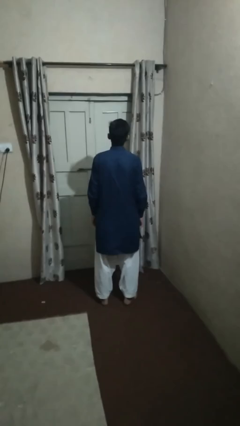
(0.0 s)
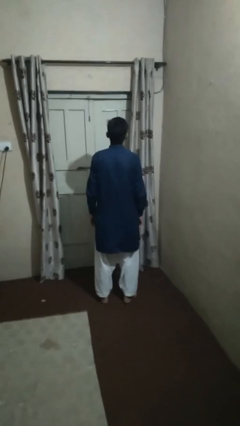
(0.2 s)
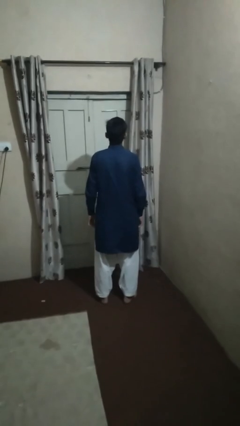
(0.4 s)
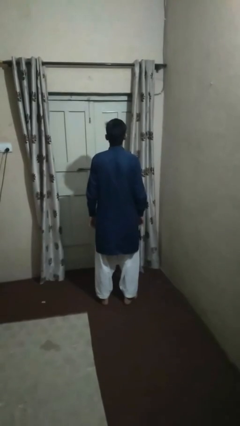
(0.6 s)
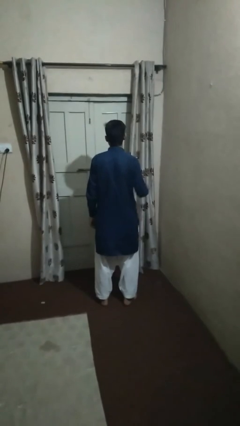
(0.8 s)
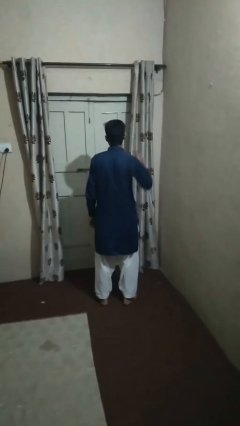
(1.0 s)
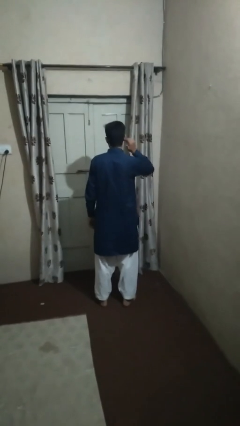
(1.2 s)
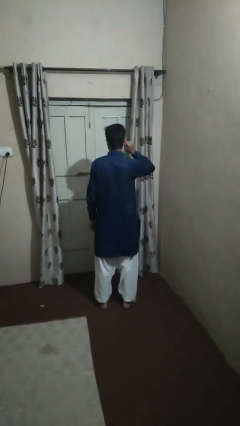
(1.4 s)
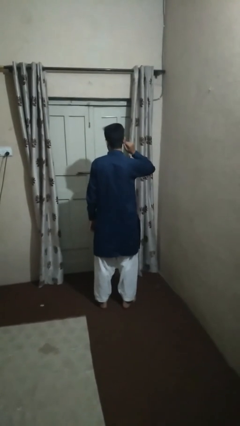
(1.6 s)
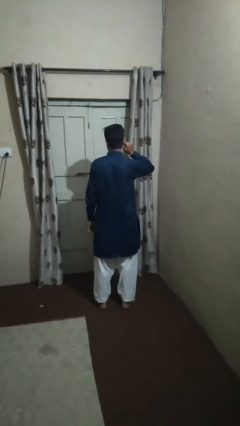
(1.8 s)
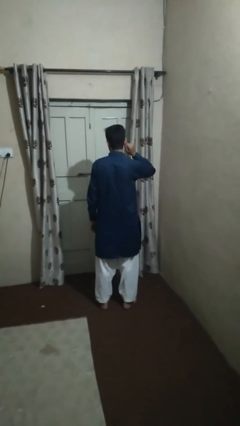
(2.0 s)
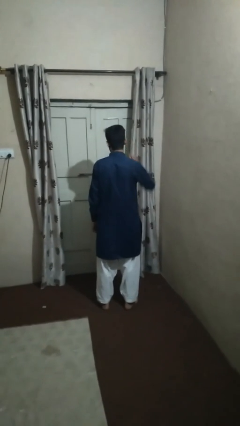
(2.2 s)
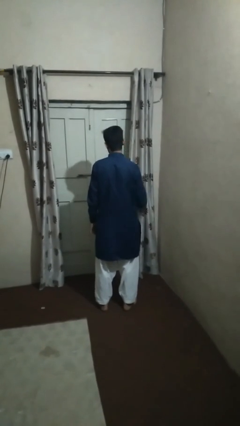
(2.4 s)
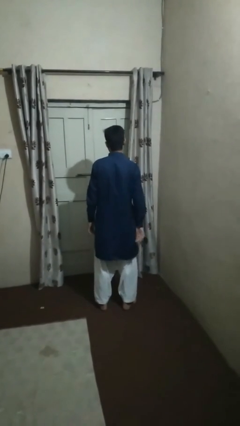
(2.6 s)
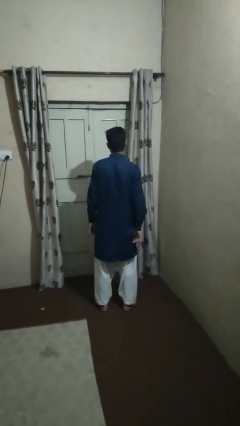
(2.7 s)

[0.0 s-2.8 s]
person touches earlobe

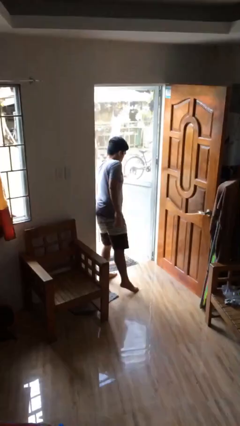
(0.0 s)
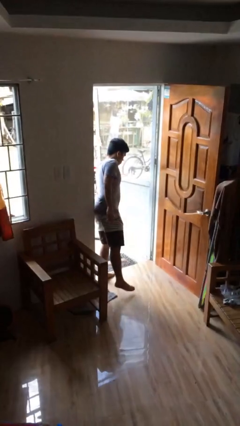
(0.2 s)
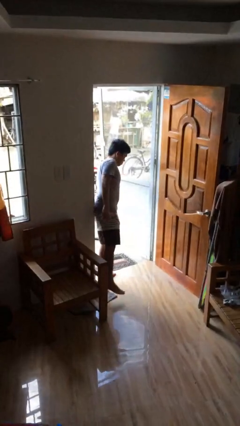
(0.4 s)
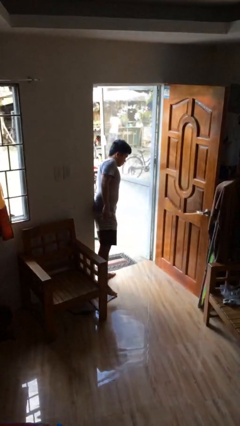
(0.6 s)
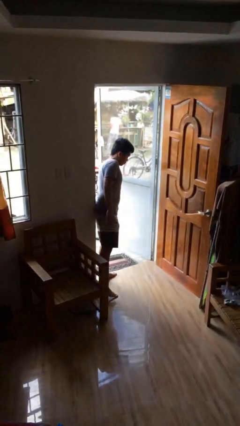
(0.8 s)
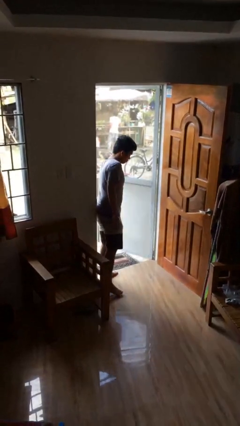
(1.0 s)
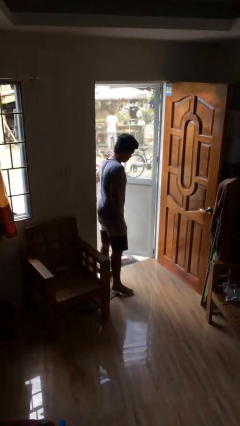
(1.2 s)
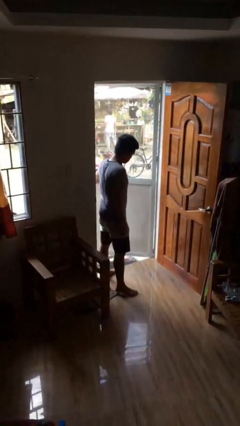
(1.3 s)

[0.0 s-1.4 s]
person opens facility door

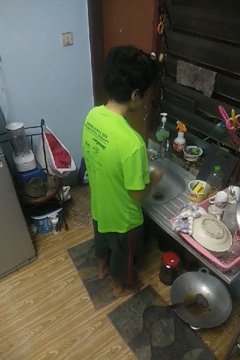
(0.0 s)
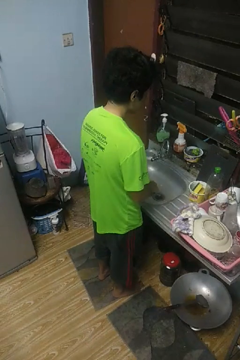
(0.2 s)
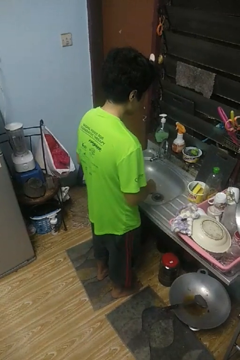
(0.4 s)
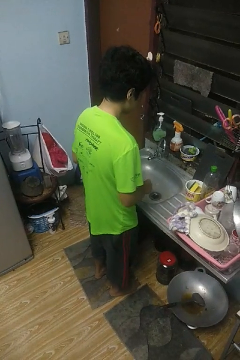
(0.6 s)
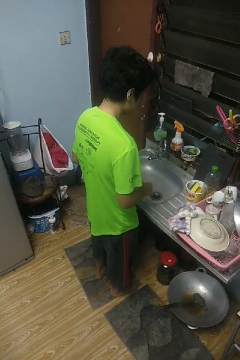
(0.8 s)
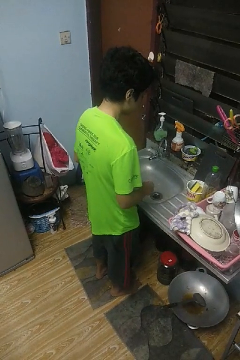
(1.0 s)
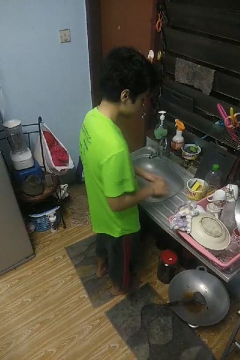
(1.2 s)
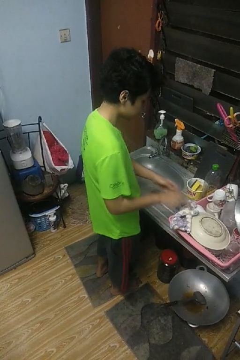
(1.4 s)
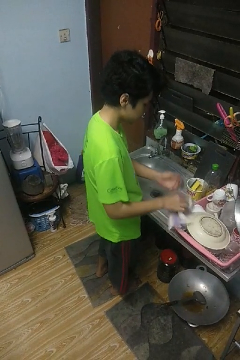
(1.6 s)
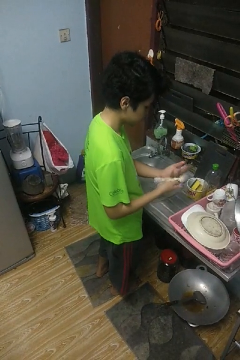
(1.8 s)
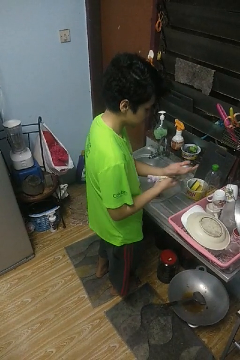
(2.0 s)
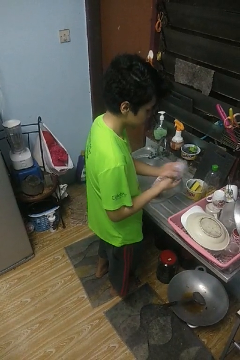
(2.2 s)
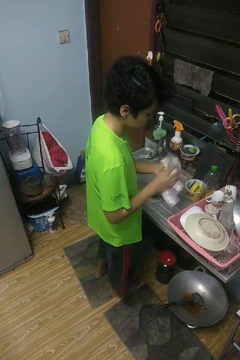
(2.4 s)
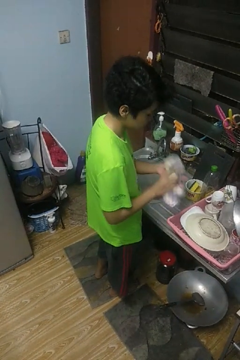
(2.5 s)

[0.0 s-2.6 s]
person dries hands with towel

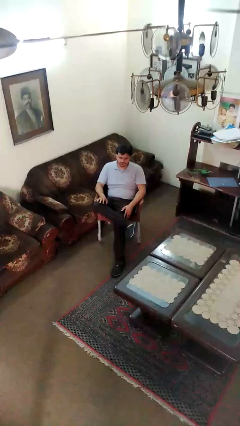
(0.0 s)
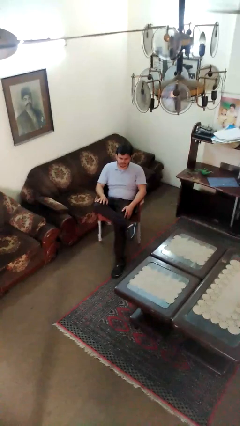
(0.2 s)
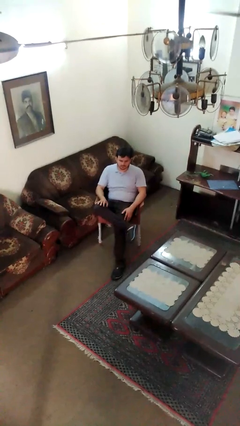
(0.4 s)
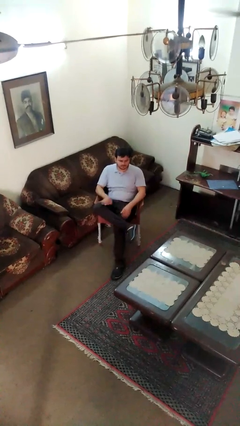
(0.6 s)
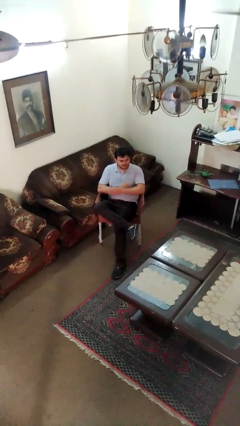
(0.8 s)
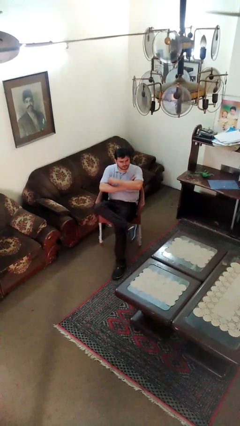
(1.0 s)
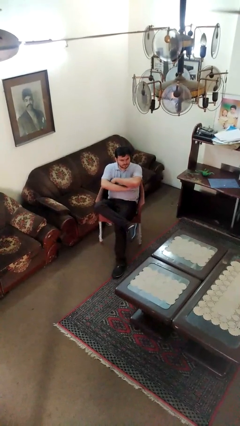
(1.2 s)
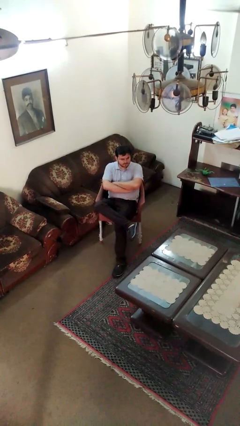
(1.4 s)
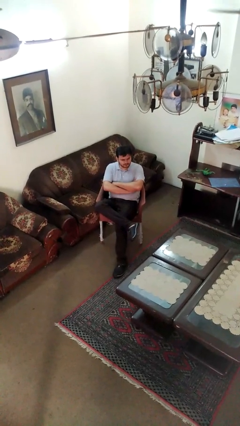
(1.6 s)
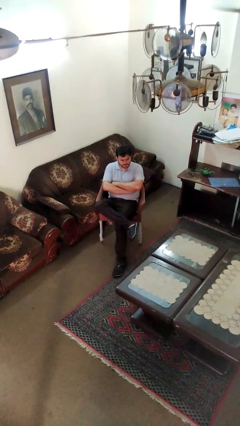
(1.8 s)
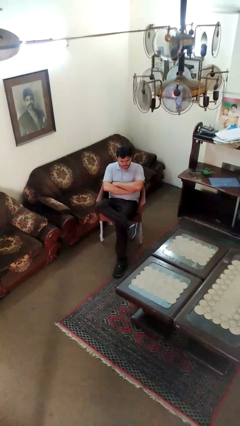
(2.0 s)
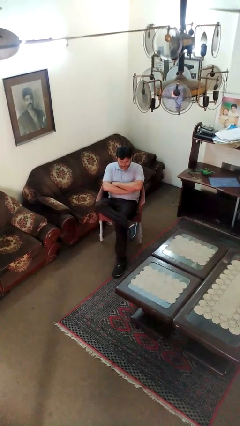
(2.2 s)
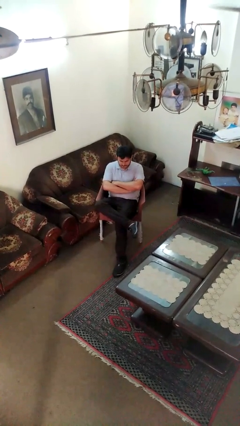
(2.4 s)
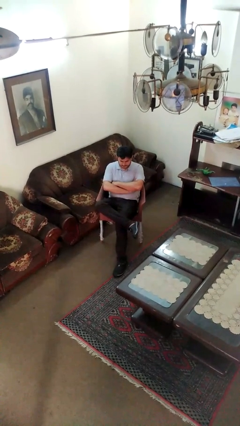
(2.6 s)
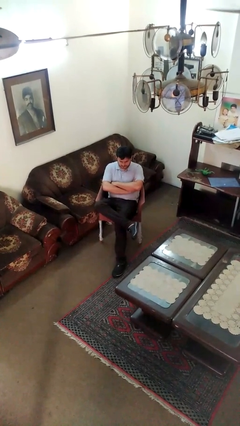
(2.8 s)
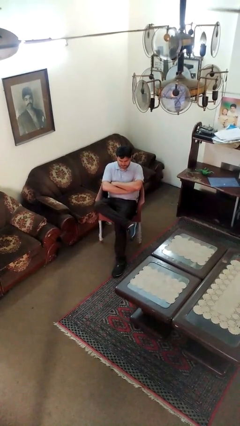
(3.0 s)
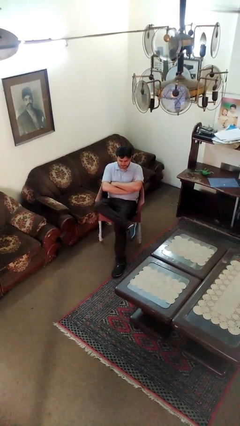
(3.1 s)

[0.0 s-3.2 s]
person crosses arms

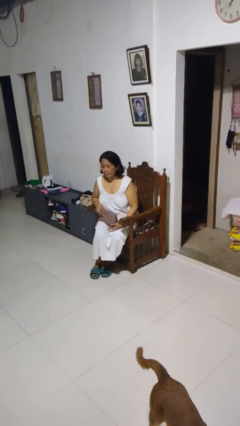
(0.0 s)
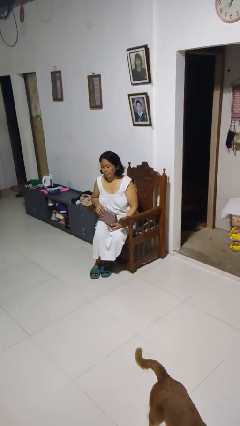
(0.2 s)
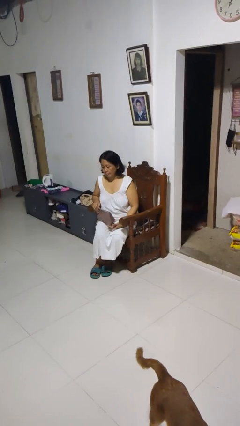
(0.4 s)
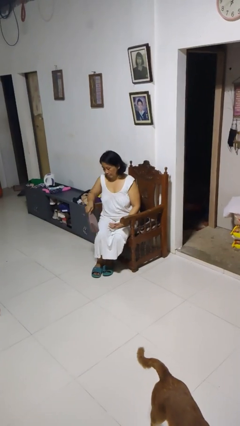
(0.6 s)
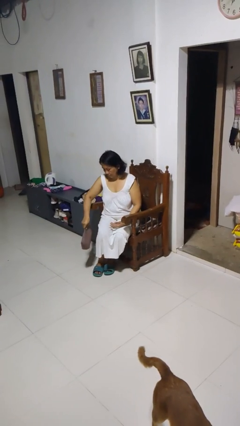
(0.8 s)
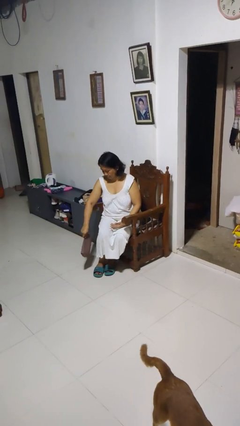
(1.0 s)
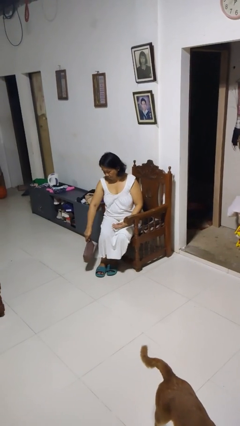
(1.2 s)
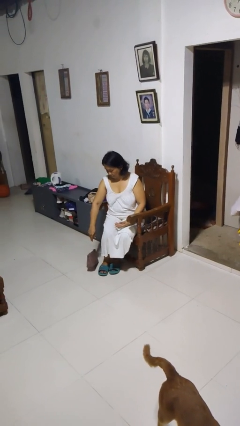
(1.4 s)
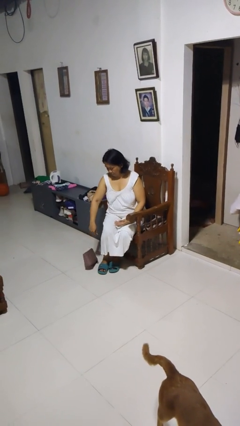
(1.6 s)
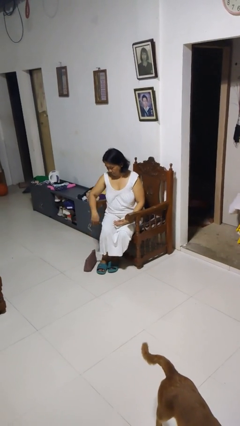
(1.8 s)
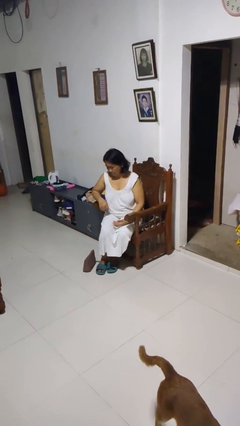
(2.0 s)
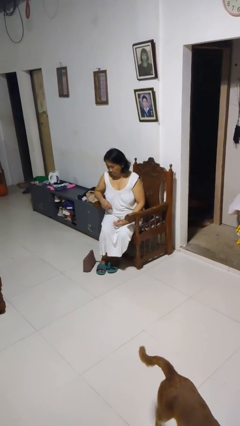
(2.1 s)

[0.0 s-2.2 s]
person drops object

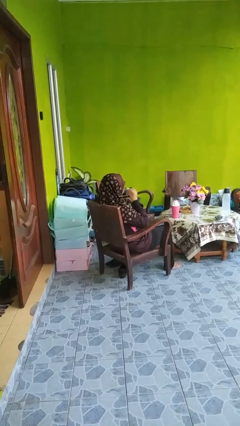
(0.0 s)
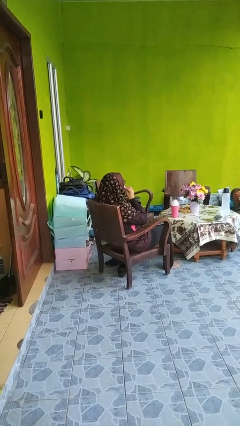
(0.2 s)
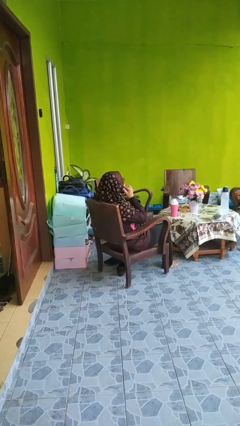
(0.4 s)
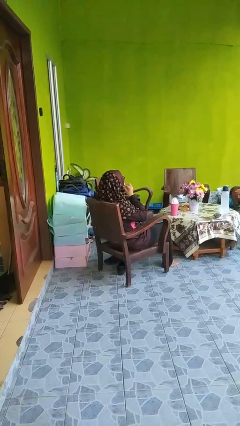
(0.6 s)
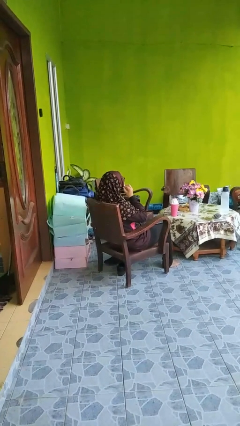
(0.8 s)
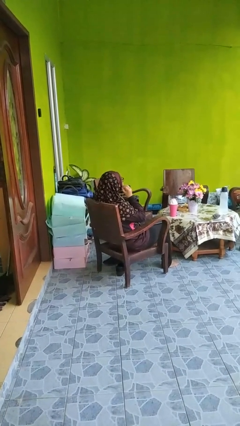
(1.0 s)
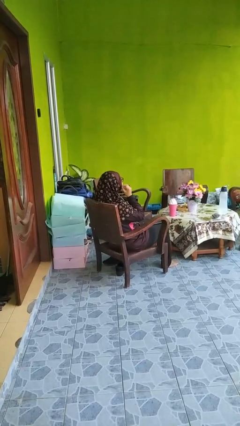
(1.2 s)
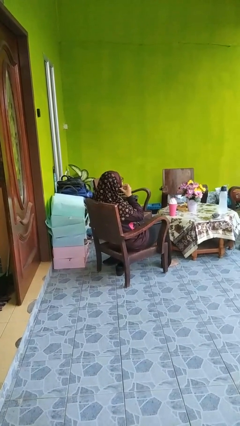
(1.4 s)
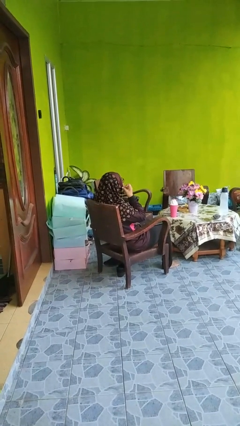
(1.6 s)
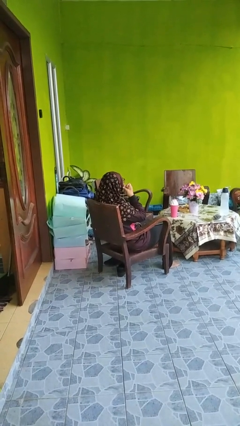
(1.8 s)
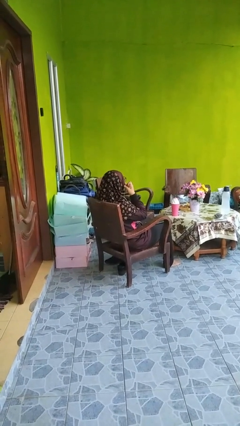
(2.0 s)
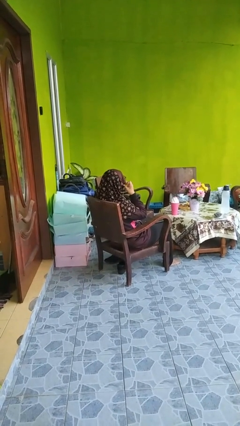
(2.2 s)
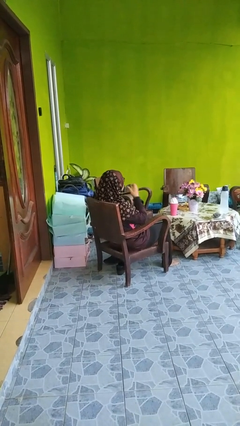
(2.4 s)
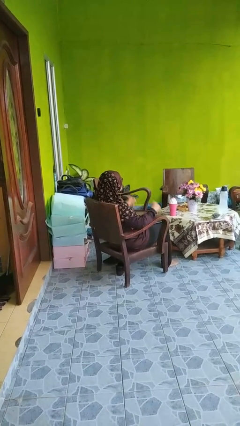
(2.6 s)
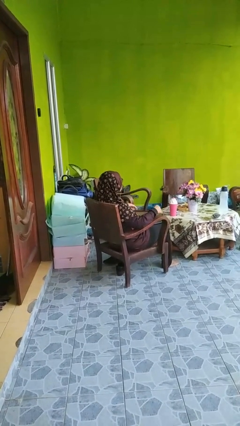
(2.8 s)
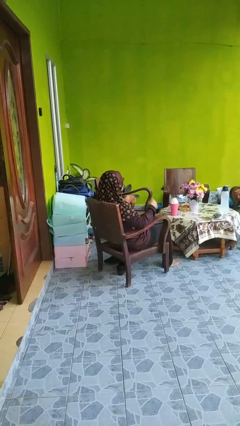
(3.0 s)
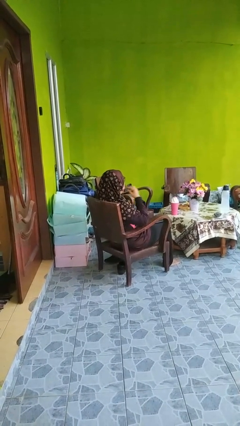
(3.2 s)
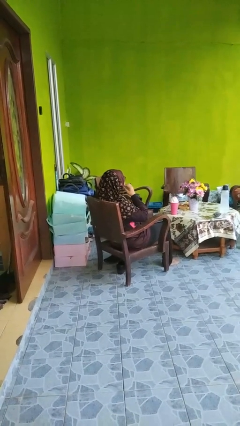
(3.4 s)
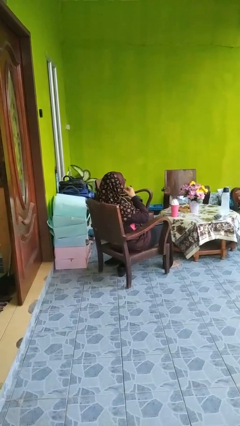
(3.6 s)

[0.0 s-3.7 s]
person puts on headphones

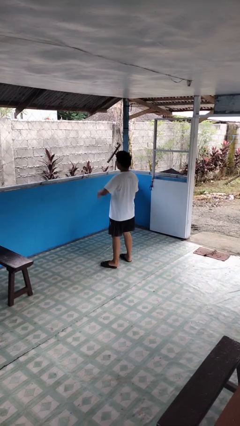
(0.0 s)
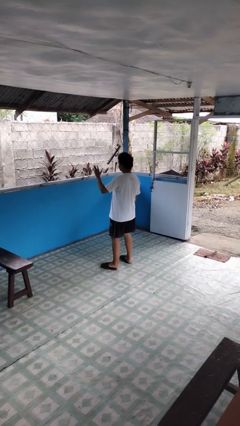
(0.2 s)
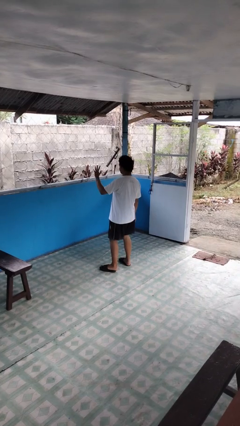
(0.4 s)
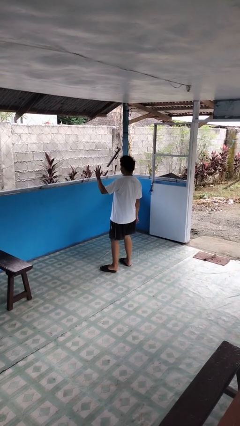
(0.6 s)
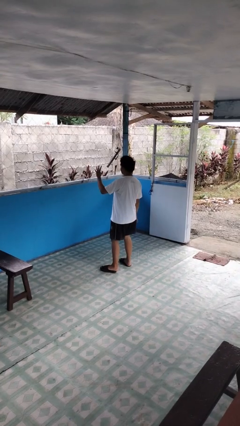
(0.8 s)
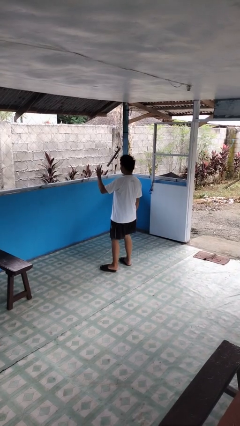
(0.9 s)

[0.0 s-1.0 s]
person gestures number five

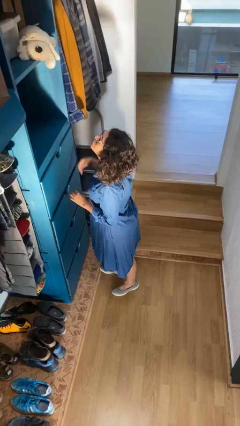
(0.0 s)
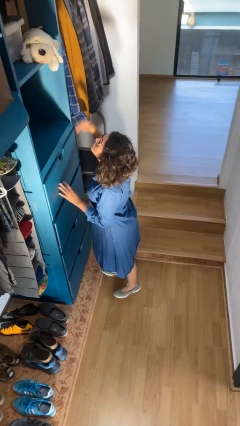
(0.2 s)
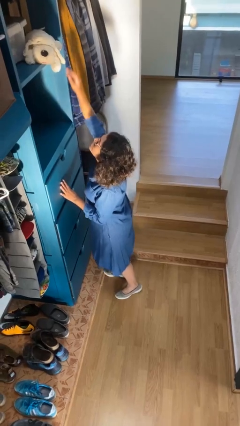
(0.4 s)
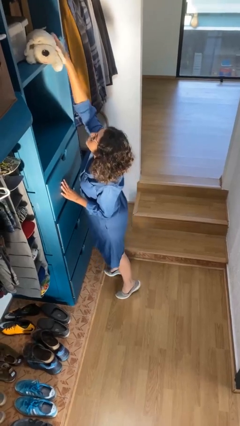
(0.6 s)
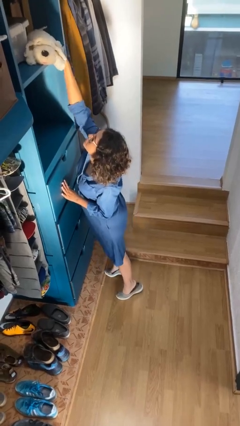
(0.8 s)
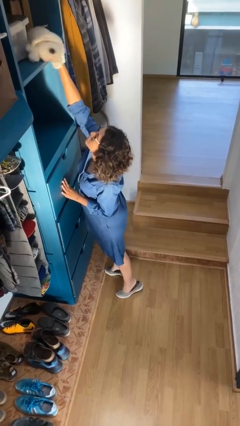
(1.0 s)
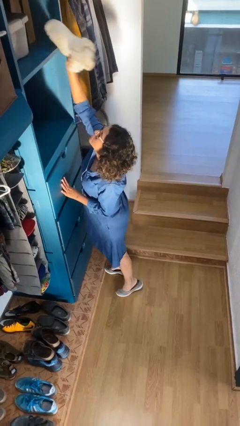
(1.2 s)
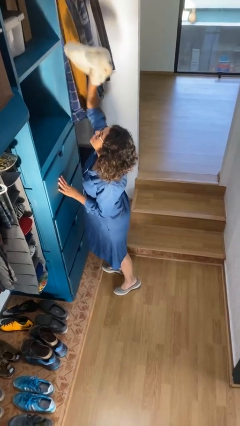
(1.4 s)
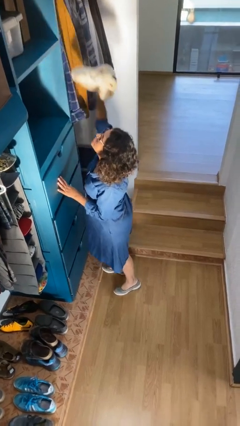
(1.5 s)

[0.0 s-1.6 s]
person picks up object from shelf
